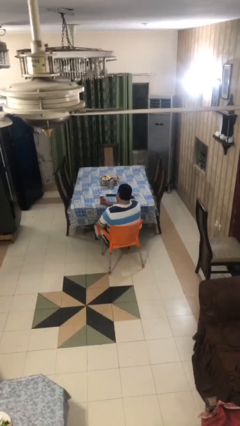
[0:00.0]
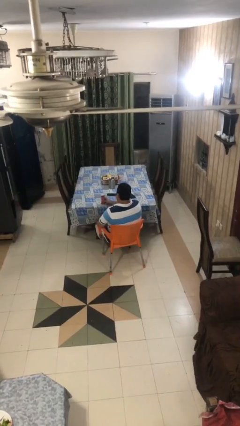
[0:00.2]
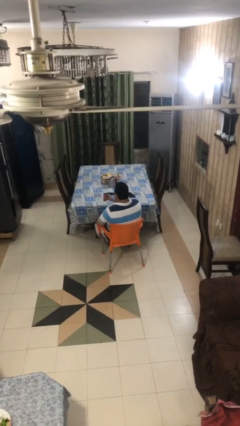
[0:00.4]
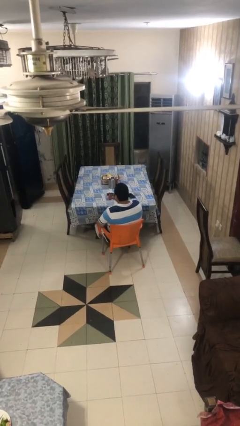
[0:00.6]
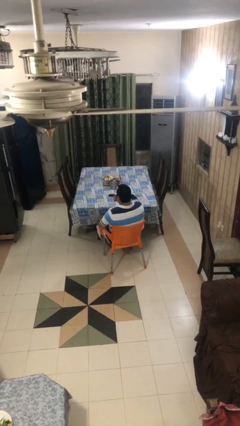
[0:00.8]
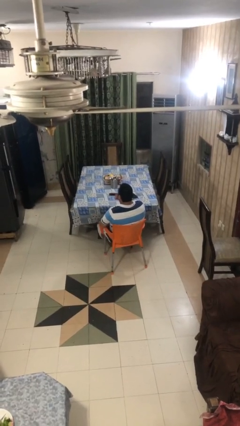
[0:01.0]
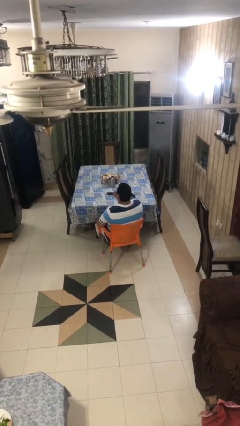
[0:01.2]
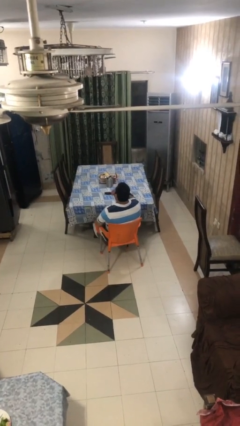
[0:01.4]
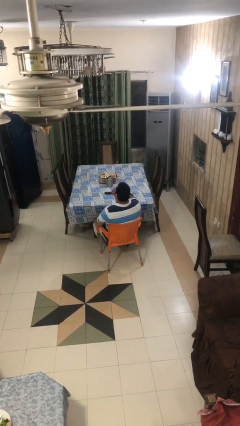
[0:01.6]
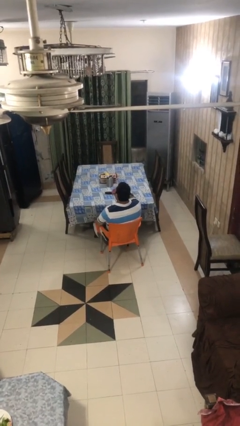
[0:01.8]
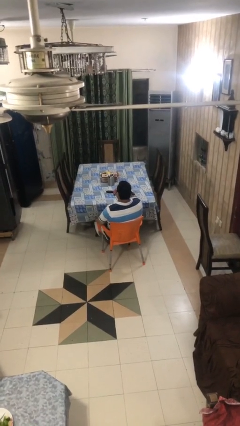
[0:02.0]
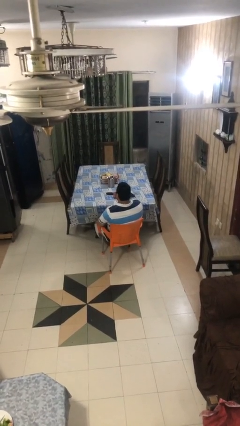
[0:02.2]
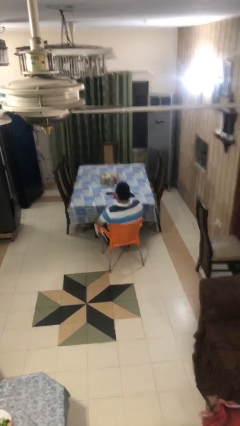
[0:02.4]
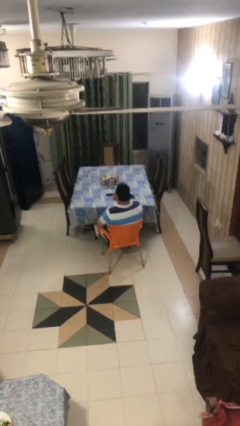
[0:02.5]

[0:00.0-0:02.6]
person drinks from beverage can

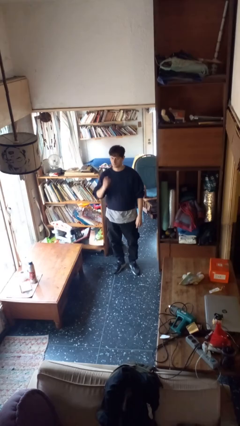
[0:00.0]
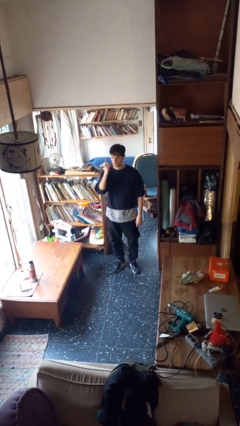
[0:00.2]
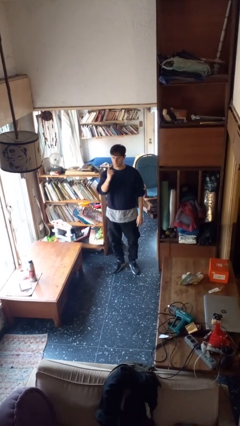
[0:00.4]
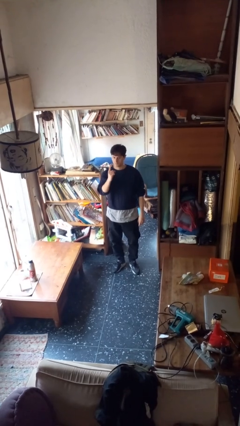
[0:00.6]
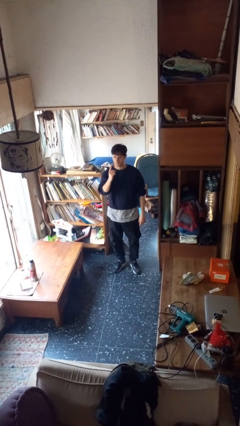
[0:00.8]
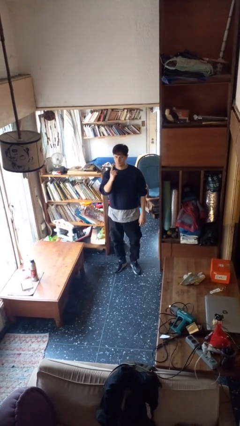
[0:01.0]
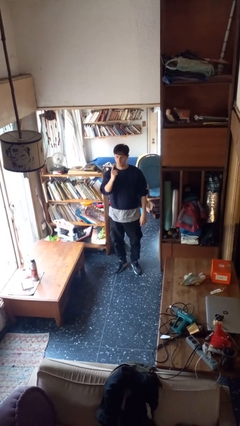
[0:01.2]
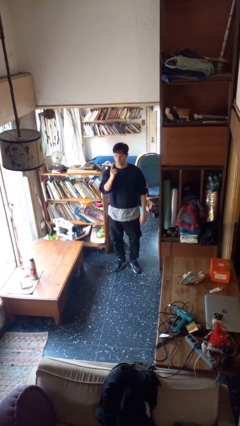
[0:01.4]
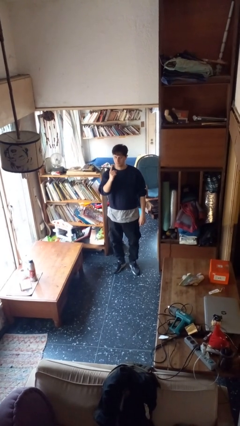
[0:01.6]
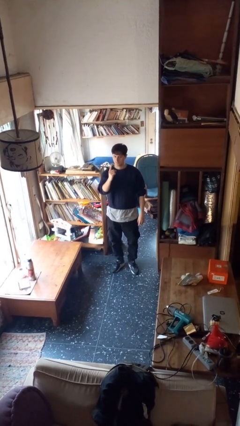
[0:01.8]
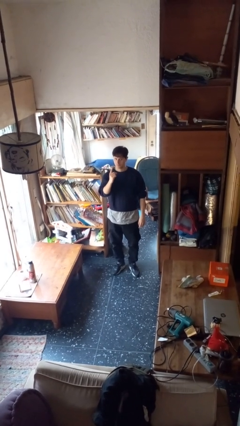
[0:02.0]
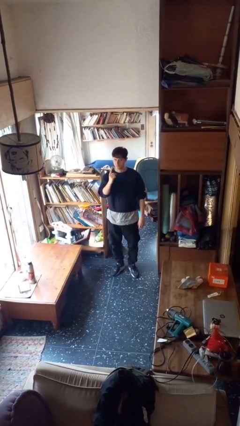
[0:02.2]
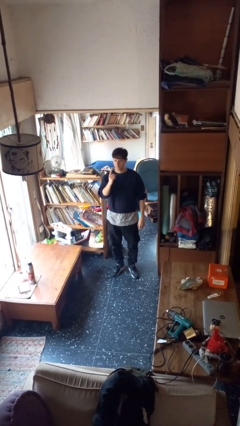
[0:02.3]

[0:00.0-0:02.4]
person gestures number one

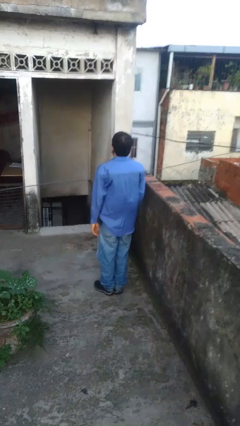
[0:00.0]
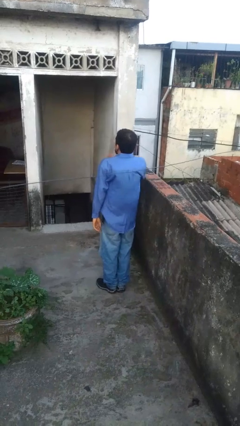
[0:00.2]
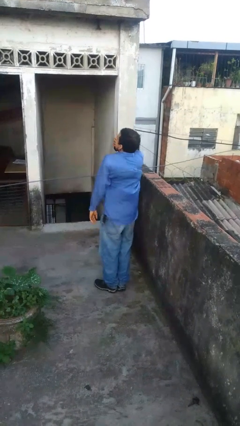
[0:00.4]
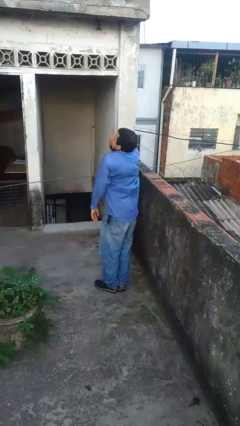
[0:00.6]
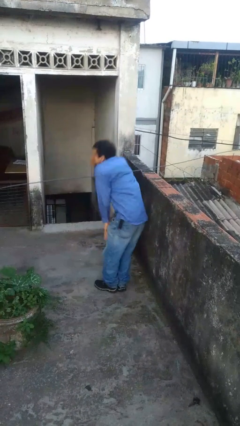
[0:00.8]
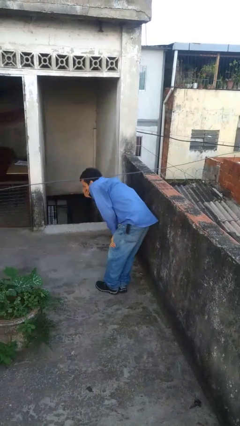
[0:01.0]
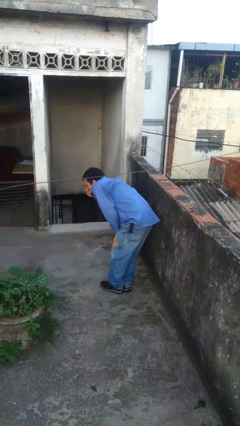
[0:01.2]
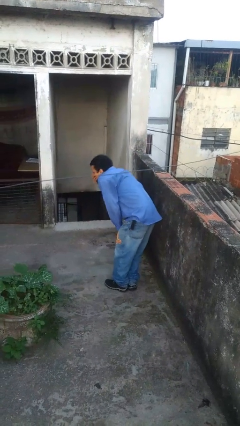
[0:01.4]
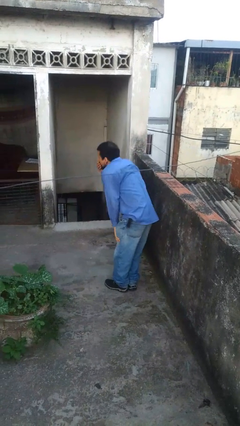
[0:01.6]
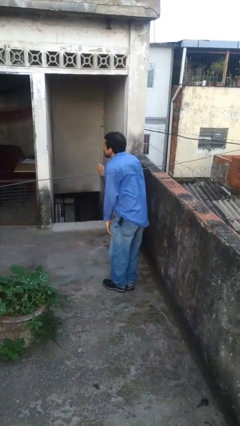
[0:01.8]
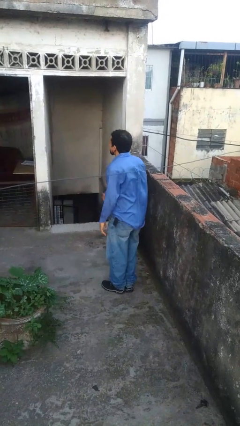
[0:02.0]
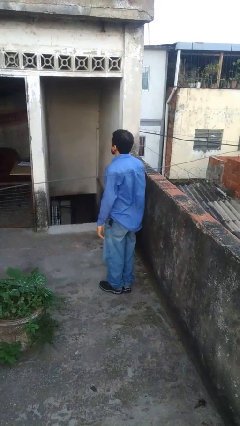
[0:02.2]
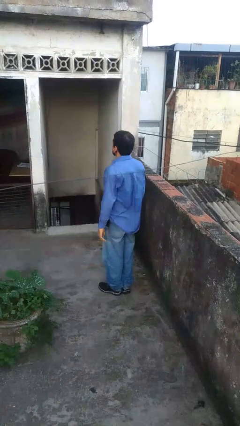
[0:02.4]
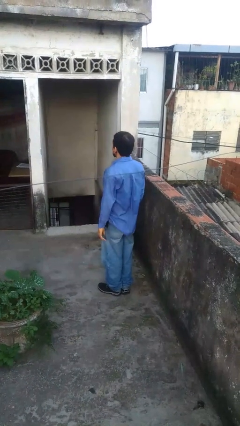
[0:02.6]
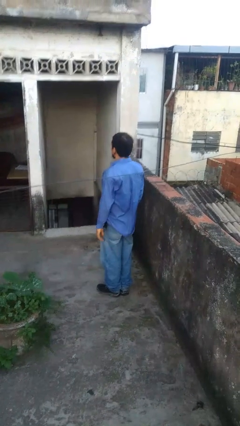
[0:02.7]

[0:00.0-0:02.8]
person sneezes into hand

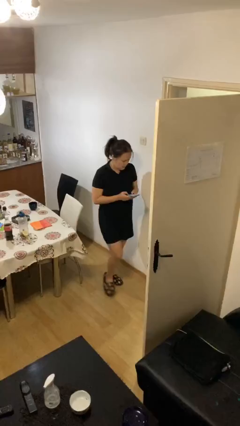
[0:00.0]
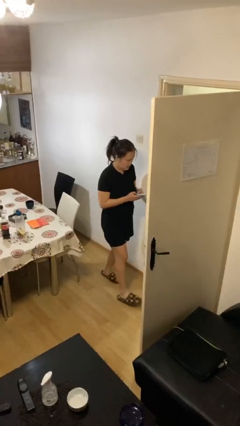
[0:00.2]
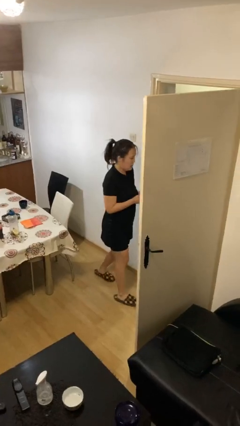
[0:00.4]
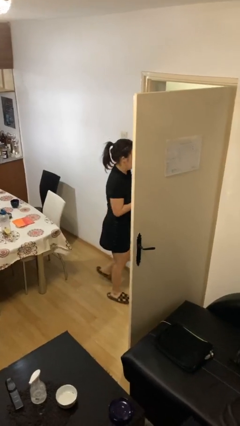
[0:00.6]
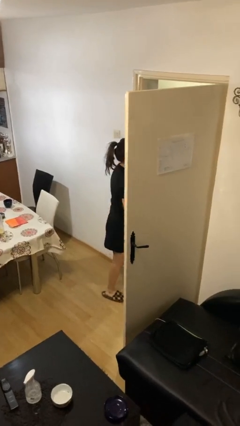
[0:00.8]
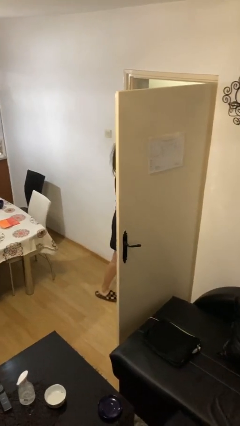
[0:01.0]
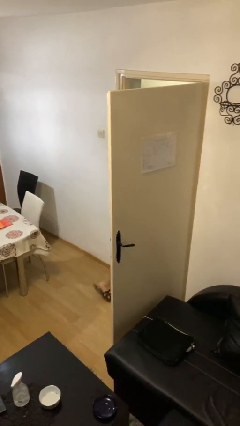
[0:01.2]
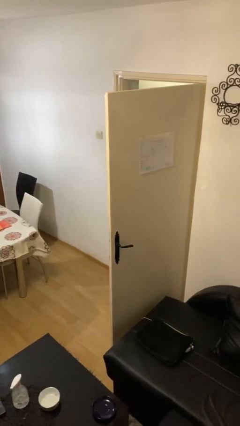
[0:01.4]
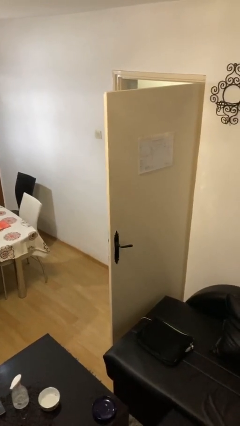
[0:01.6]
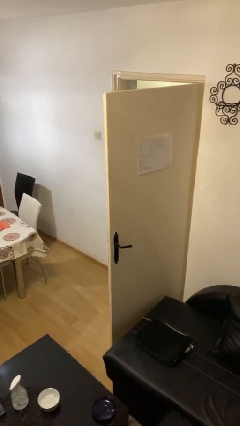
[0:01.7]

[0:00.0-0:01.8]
person exits scene through structure

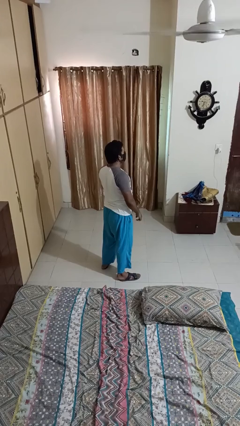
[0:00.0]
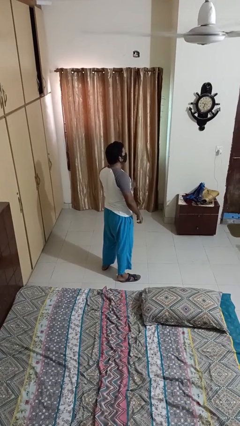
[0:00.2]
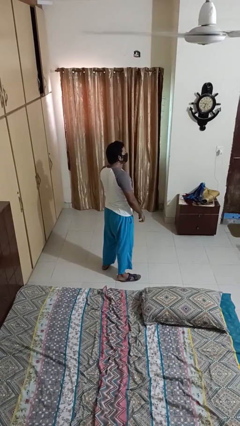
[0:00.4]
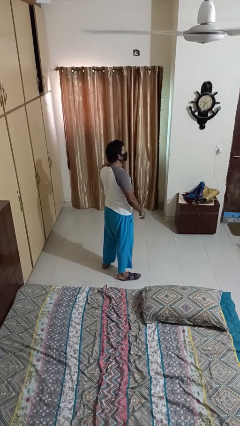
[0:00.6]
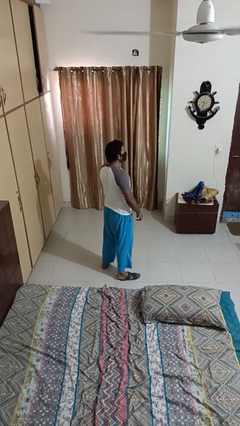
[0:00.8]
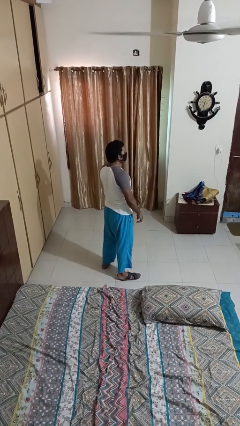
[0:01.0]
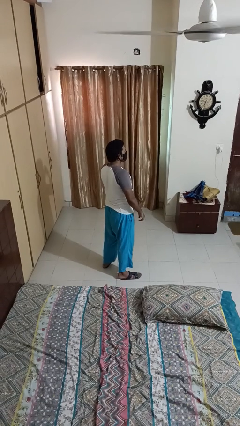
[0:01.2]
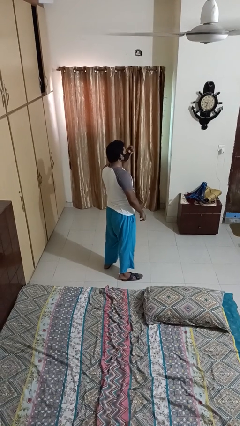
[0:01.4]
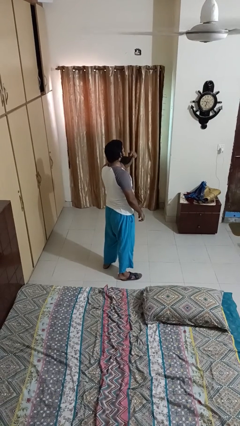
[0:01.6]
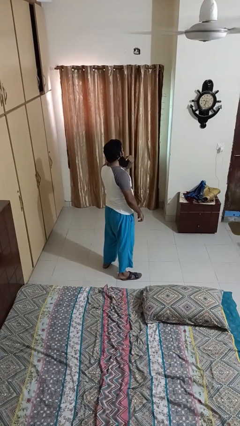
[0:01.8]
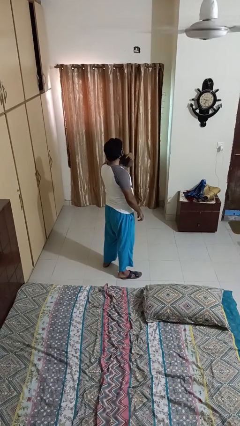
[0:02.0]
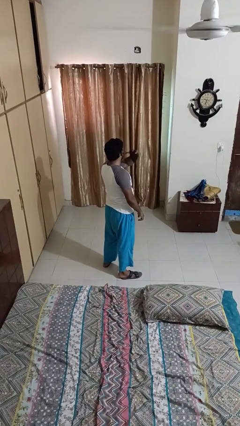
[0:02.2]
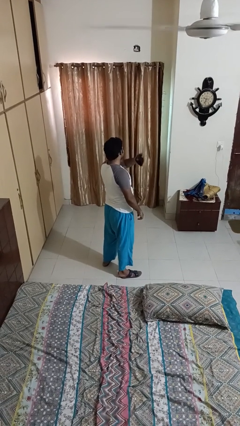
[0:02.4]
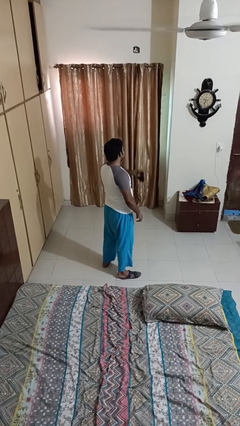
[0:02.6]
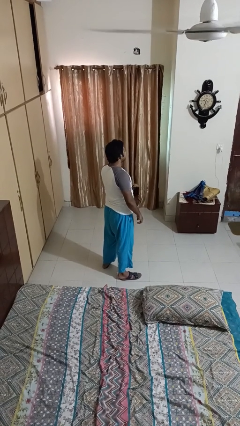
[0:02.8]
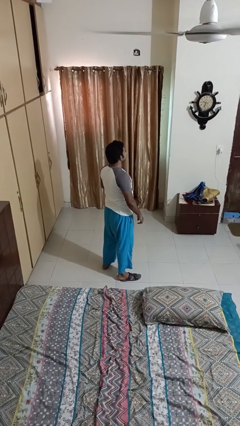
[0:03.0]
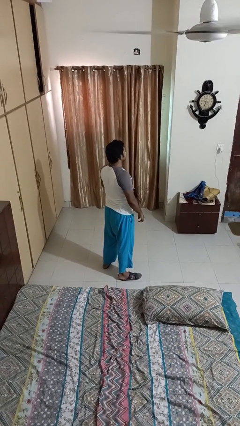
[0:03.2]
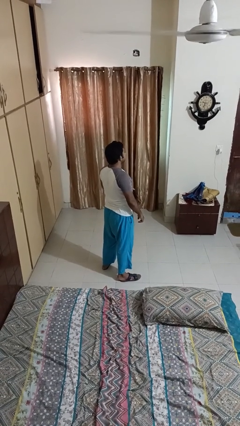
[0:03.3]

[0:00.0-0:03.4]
person takes off facemask

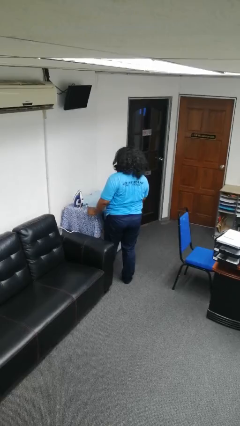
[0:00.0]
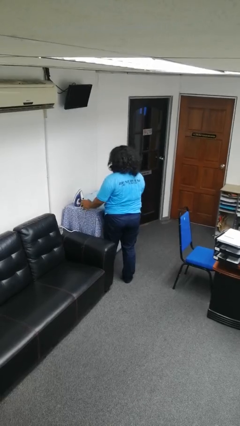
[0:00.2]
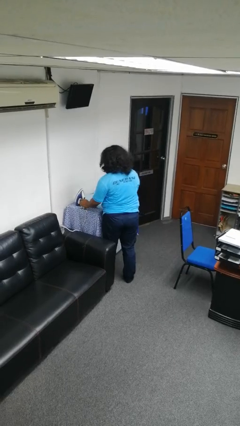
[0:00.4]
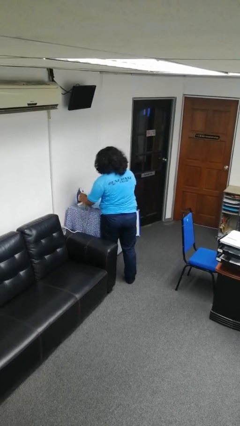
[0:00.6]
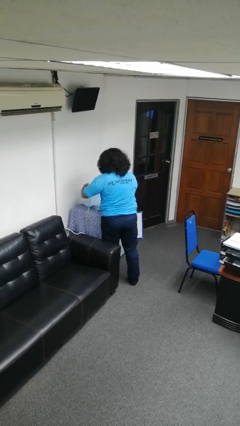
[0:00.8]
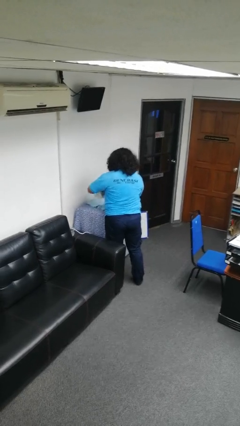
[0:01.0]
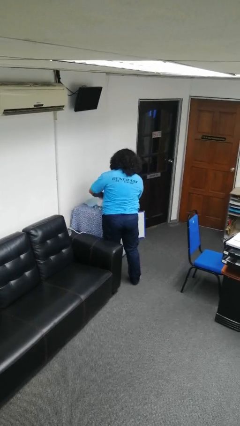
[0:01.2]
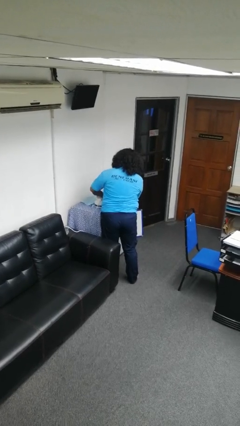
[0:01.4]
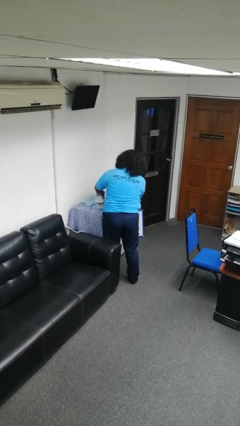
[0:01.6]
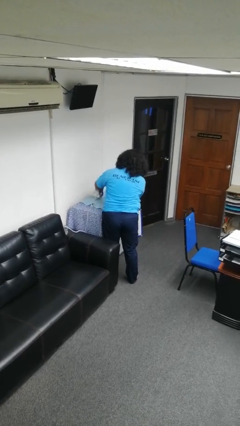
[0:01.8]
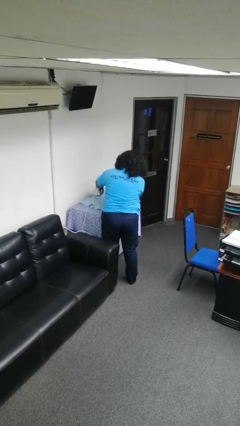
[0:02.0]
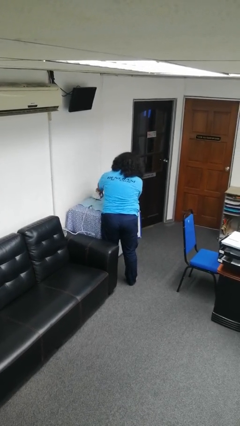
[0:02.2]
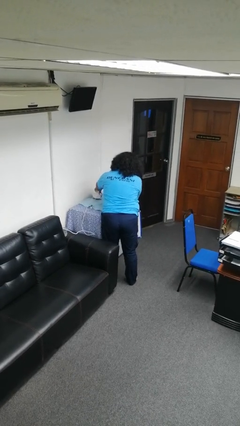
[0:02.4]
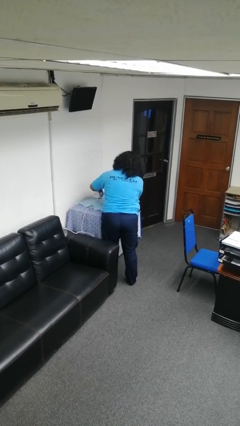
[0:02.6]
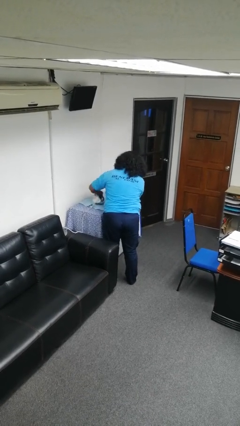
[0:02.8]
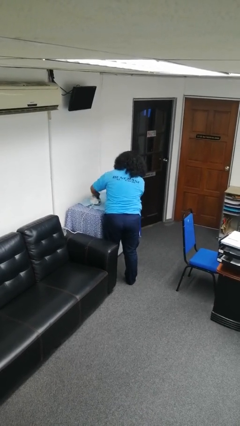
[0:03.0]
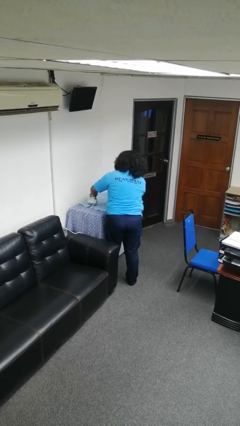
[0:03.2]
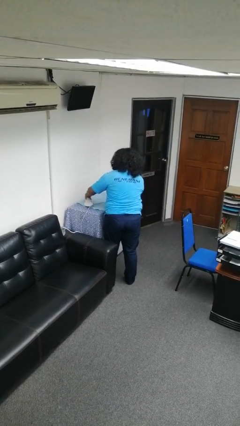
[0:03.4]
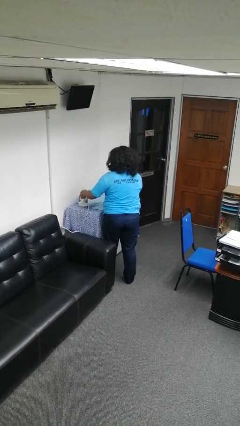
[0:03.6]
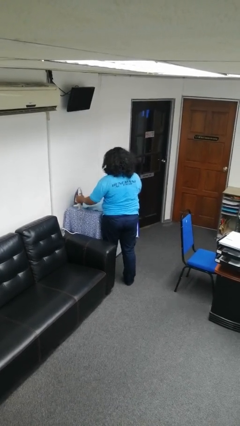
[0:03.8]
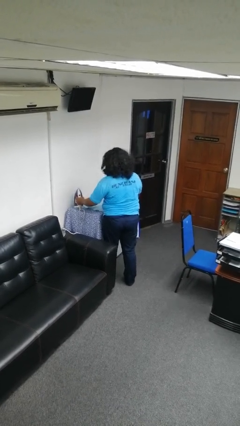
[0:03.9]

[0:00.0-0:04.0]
person irons clothes

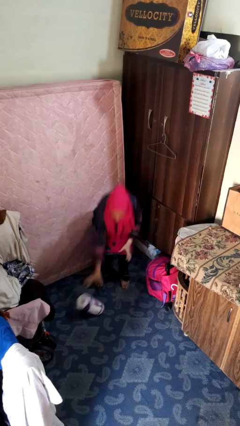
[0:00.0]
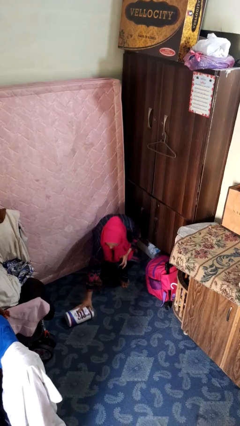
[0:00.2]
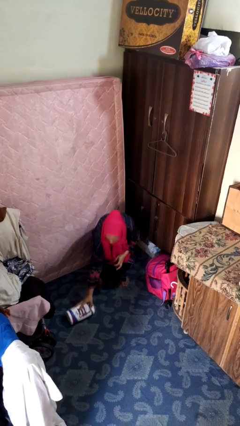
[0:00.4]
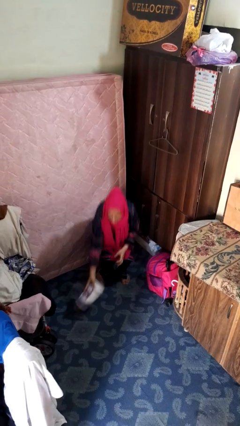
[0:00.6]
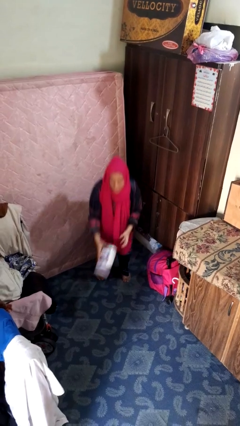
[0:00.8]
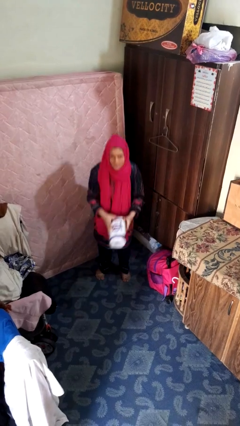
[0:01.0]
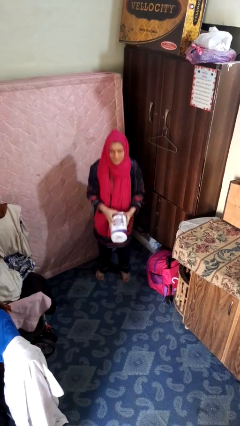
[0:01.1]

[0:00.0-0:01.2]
person picks up object from floor
